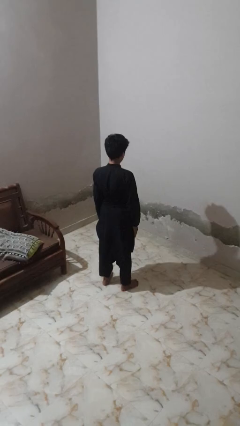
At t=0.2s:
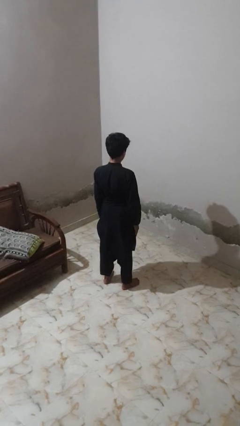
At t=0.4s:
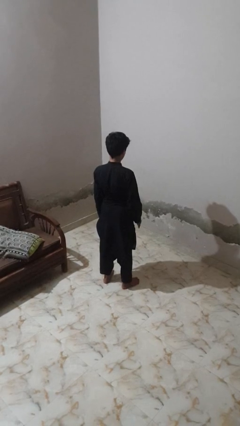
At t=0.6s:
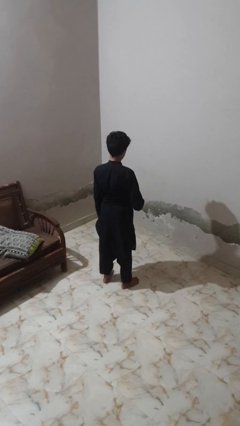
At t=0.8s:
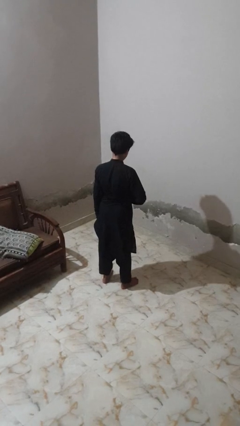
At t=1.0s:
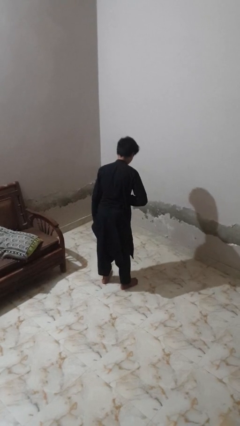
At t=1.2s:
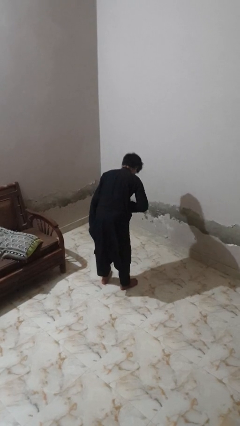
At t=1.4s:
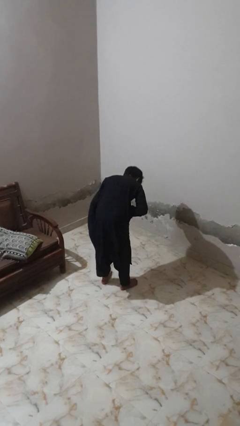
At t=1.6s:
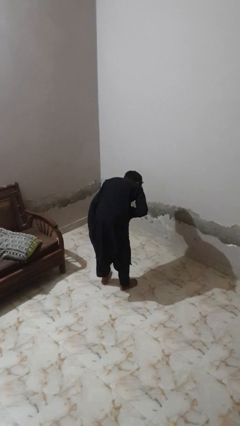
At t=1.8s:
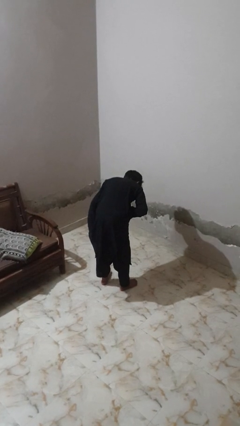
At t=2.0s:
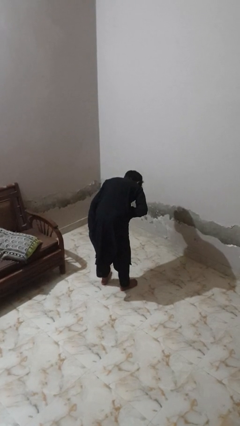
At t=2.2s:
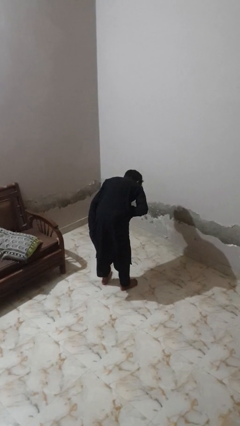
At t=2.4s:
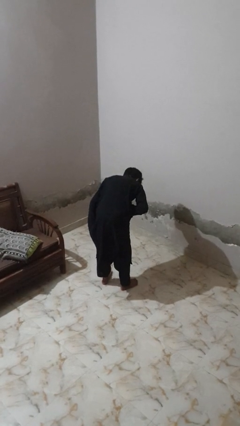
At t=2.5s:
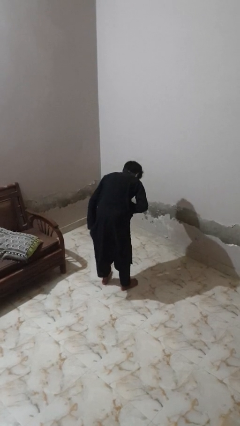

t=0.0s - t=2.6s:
person bows

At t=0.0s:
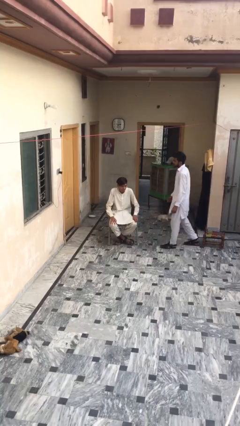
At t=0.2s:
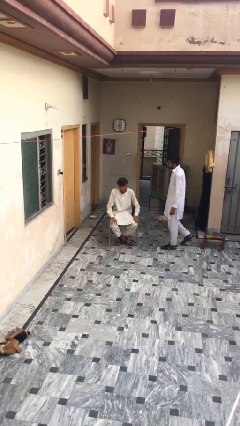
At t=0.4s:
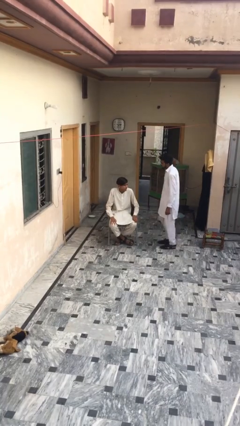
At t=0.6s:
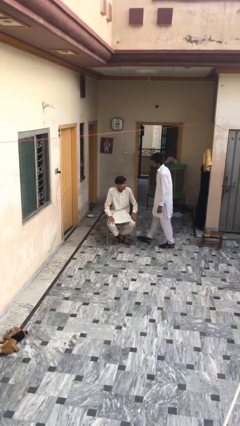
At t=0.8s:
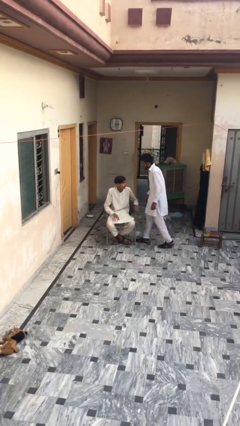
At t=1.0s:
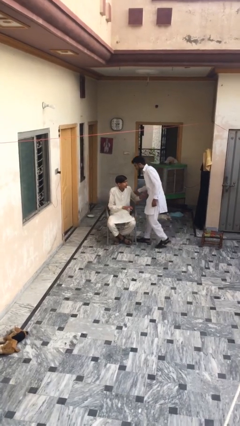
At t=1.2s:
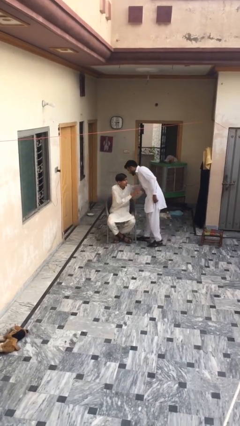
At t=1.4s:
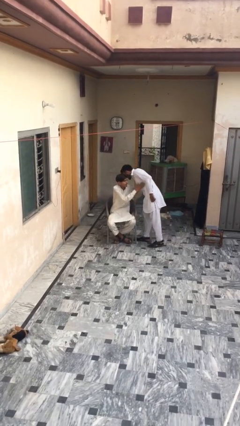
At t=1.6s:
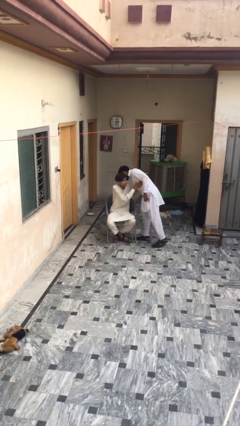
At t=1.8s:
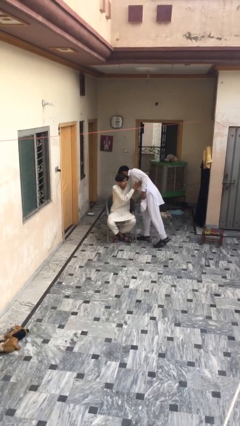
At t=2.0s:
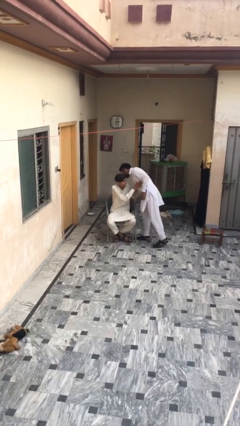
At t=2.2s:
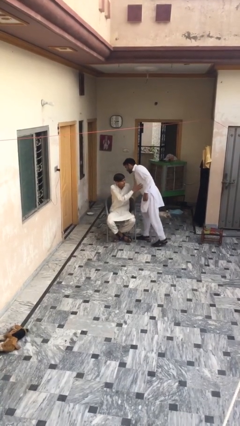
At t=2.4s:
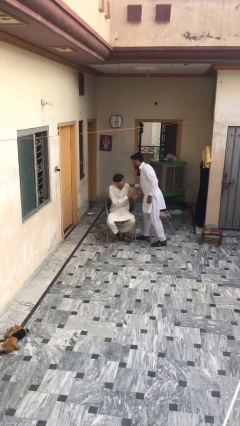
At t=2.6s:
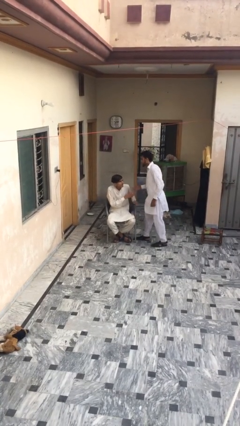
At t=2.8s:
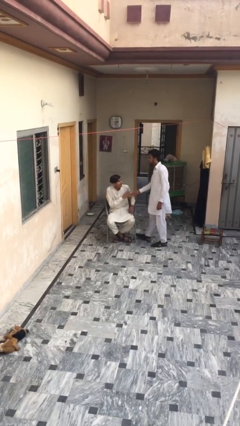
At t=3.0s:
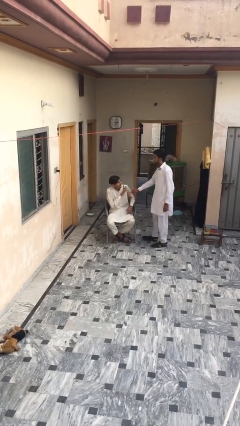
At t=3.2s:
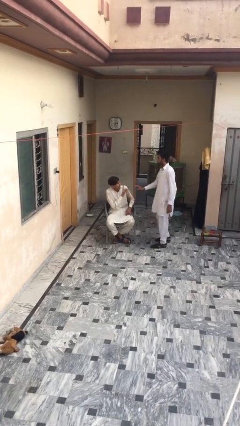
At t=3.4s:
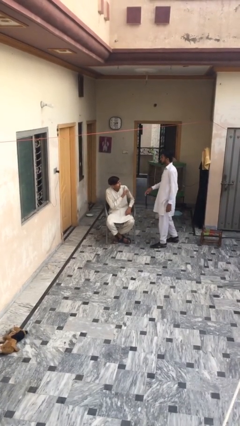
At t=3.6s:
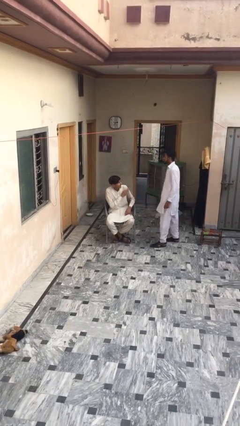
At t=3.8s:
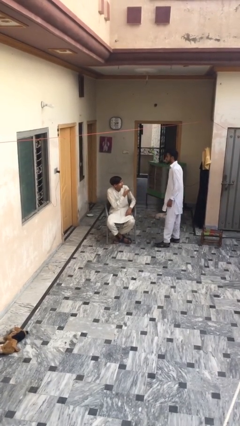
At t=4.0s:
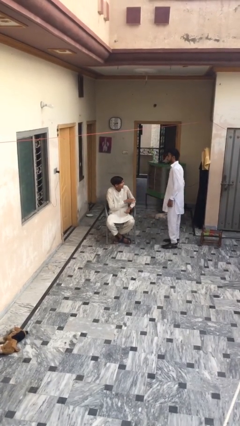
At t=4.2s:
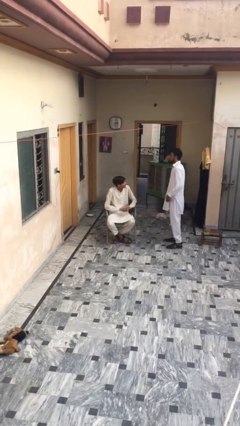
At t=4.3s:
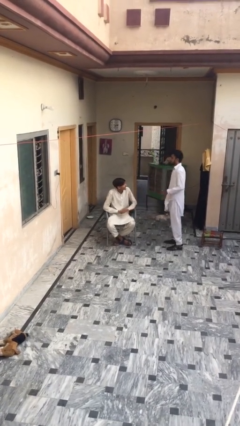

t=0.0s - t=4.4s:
person embraces person

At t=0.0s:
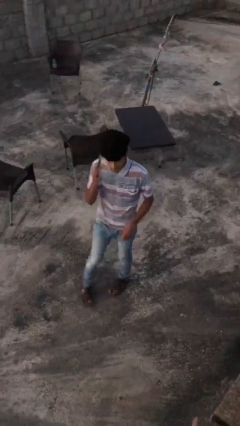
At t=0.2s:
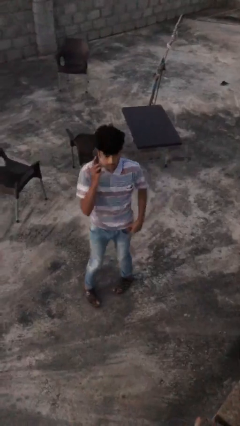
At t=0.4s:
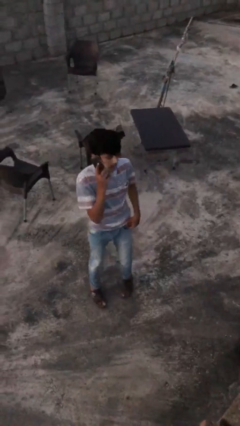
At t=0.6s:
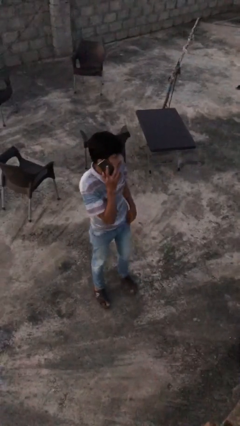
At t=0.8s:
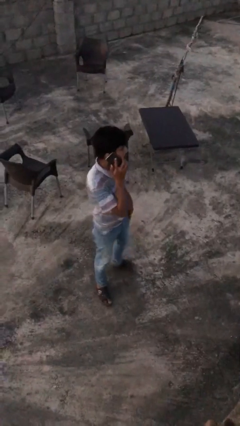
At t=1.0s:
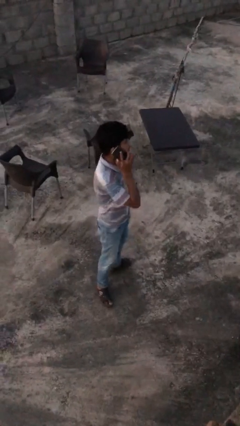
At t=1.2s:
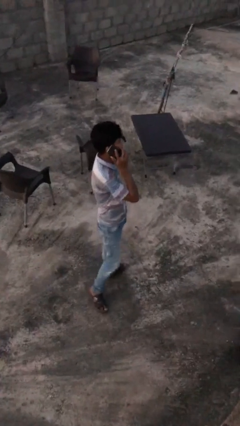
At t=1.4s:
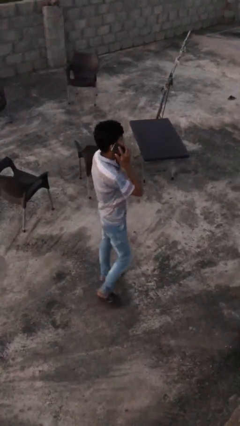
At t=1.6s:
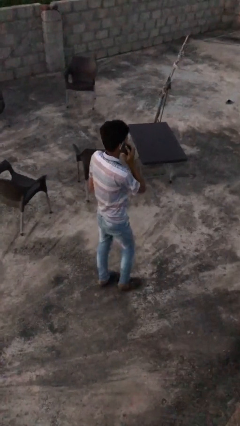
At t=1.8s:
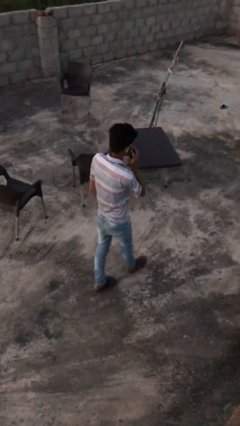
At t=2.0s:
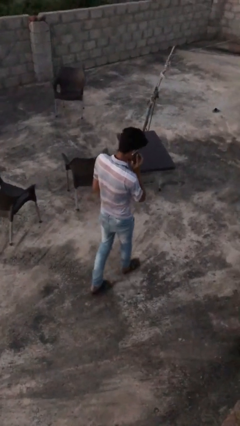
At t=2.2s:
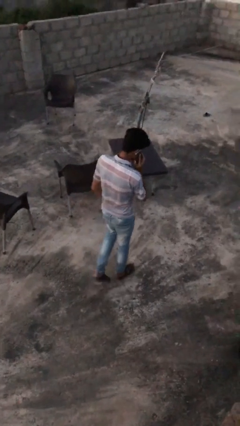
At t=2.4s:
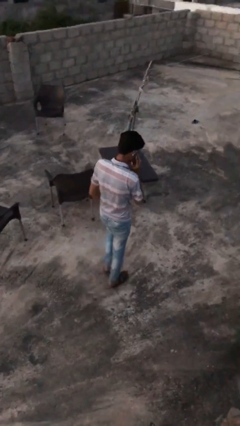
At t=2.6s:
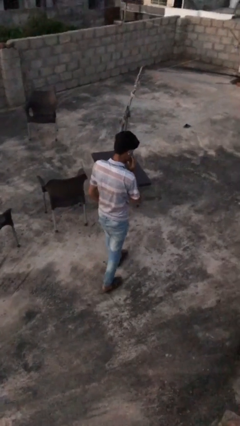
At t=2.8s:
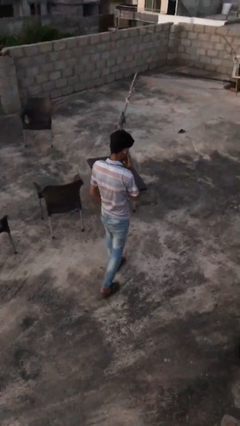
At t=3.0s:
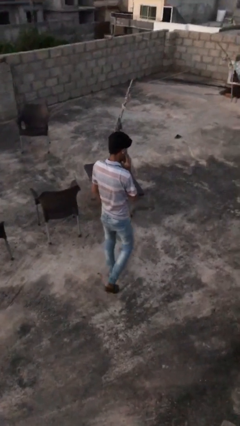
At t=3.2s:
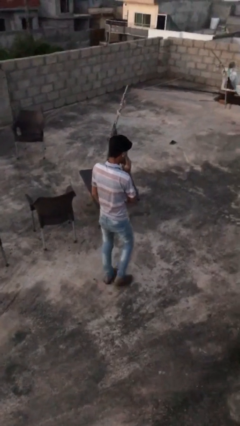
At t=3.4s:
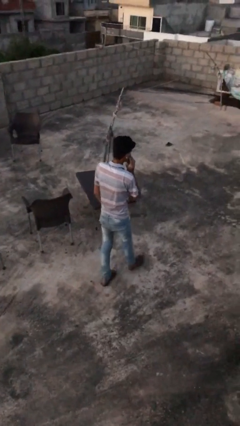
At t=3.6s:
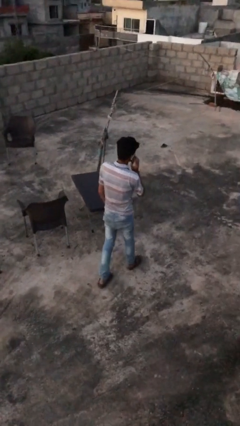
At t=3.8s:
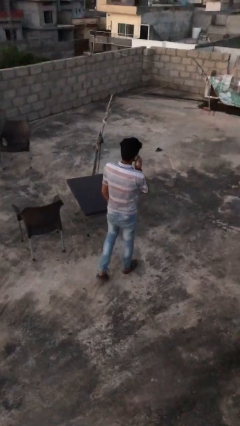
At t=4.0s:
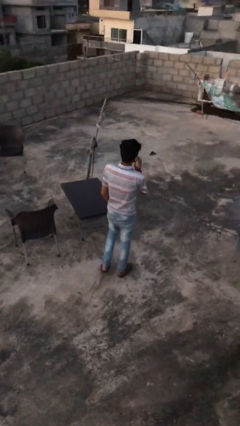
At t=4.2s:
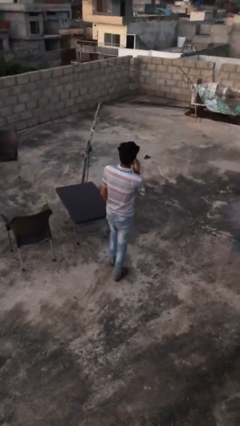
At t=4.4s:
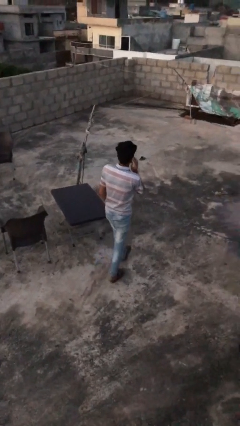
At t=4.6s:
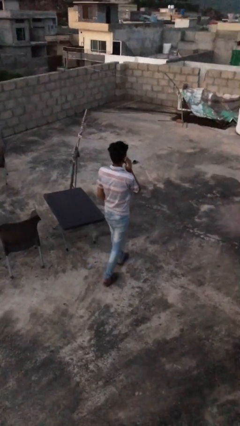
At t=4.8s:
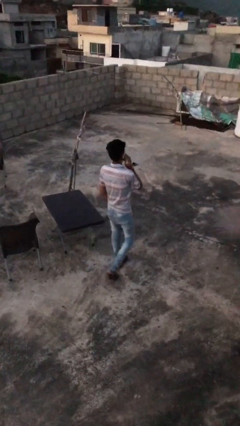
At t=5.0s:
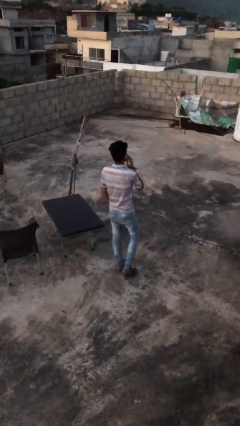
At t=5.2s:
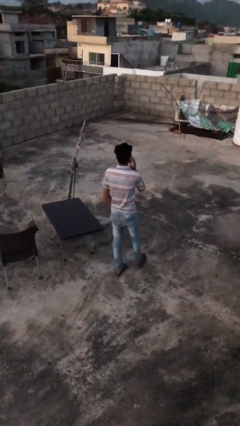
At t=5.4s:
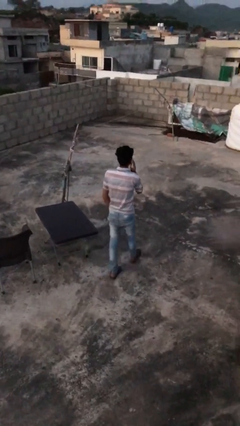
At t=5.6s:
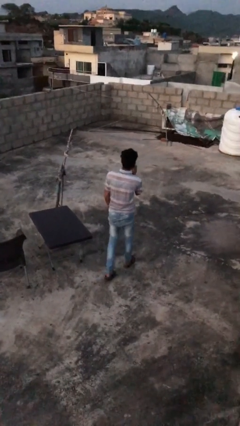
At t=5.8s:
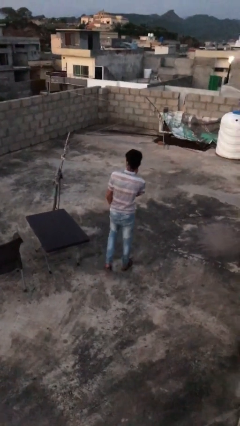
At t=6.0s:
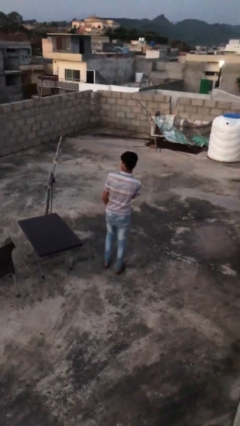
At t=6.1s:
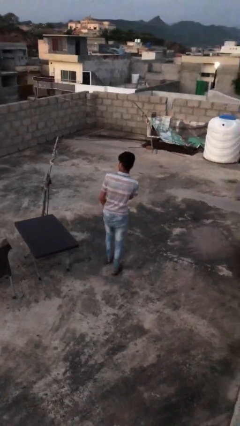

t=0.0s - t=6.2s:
person talks on phone

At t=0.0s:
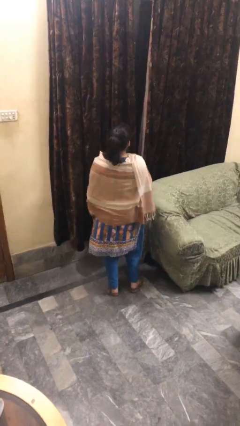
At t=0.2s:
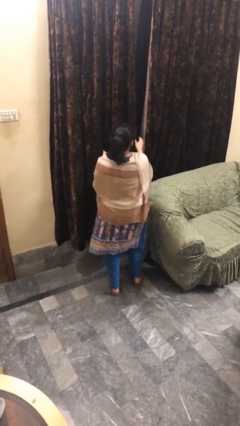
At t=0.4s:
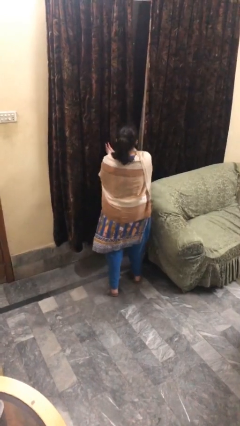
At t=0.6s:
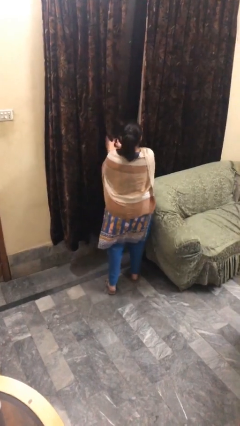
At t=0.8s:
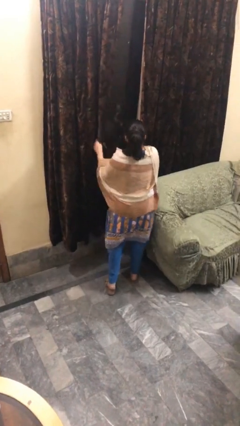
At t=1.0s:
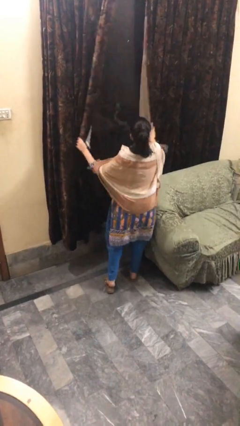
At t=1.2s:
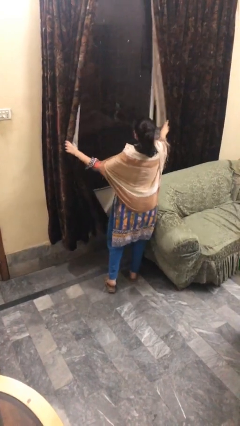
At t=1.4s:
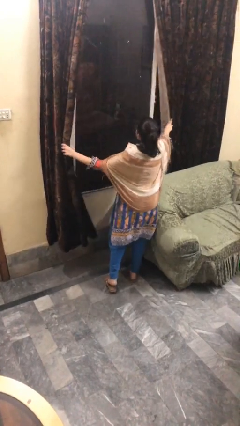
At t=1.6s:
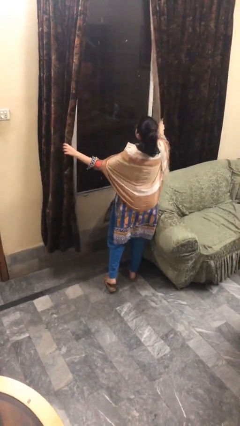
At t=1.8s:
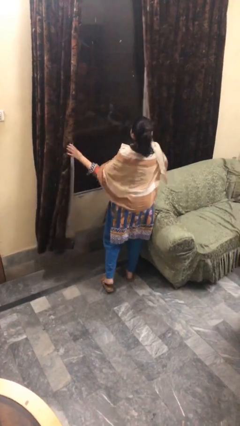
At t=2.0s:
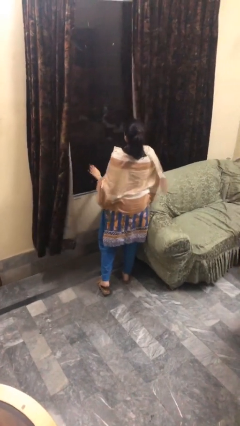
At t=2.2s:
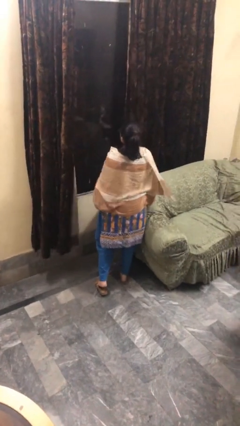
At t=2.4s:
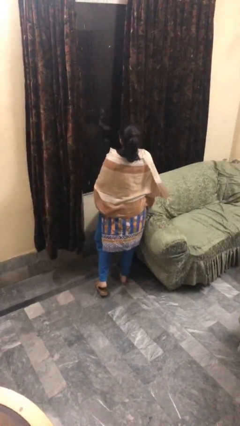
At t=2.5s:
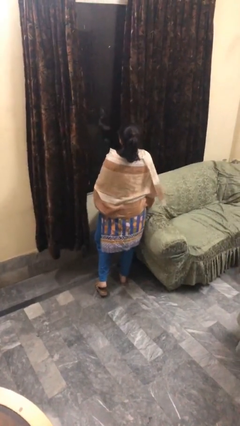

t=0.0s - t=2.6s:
person opens curtains

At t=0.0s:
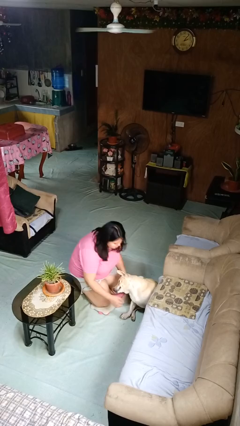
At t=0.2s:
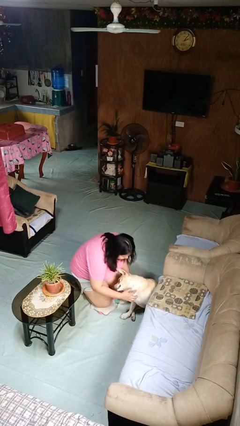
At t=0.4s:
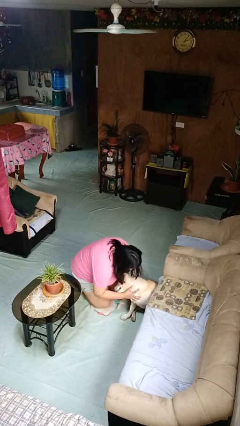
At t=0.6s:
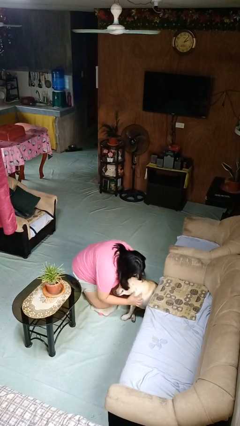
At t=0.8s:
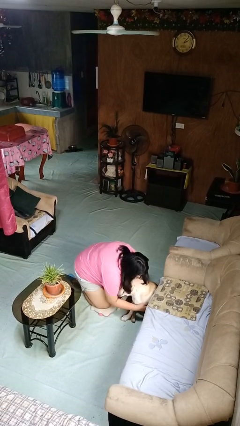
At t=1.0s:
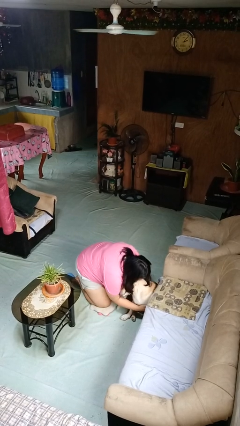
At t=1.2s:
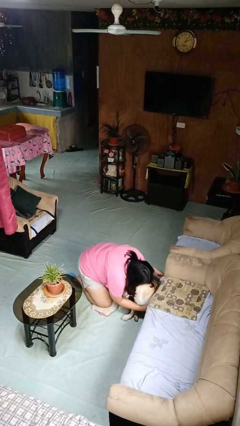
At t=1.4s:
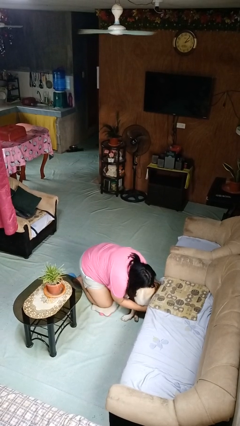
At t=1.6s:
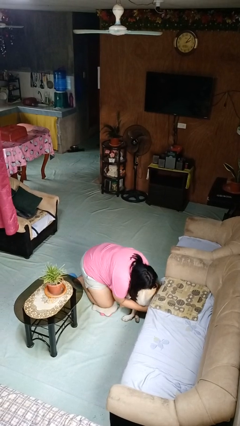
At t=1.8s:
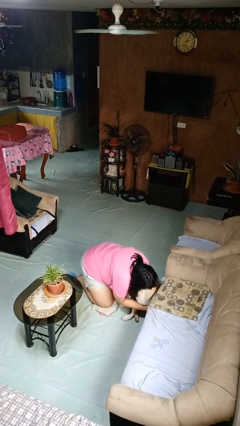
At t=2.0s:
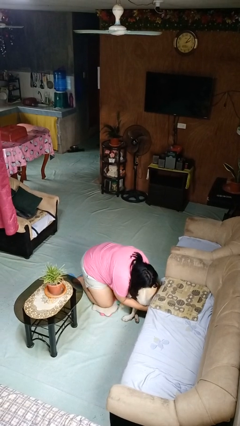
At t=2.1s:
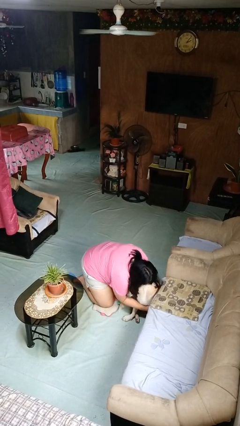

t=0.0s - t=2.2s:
person hugs dog
